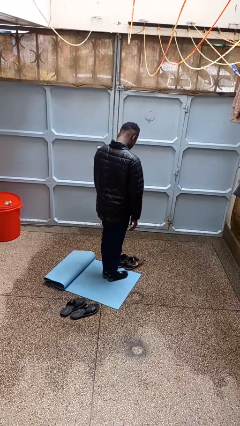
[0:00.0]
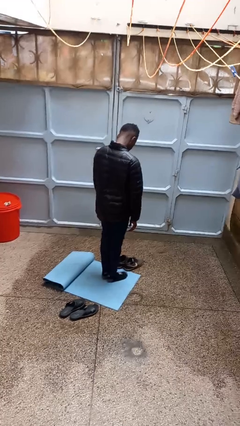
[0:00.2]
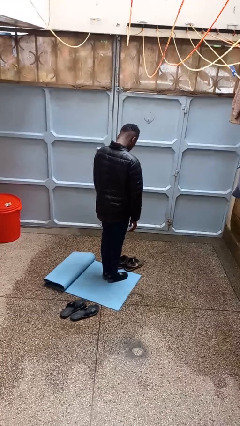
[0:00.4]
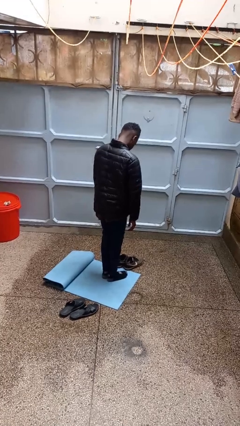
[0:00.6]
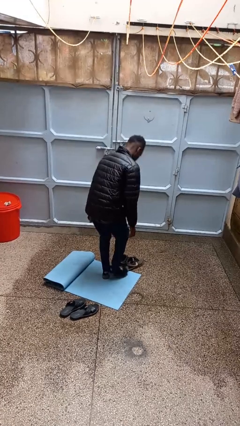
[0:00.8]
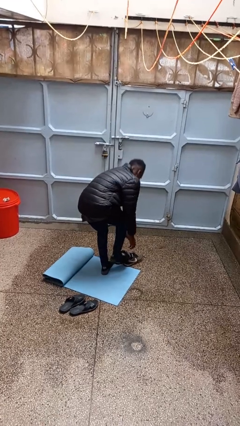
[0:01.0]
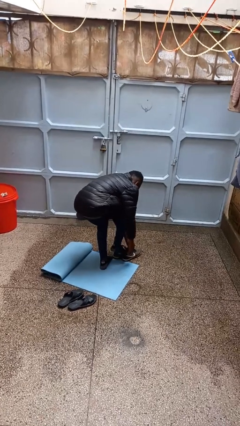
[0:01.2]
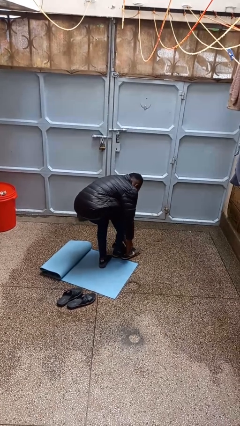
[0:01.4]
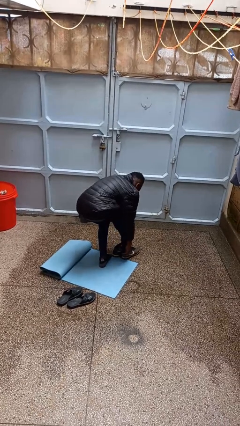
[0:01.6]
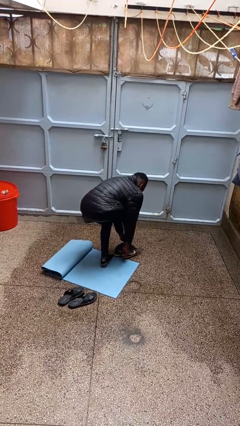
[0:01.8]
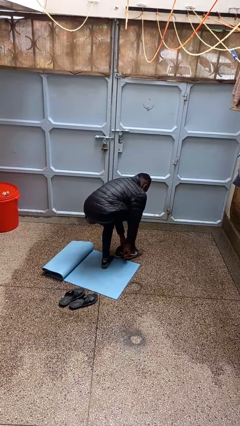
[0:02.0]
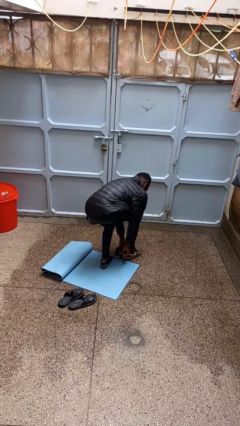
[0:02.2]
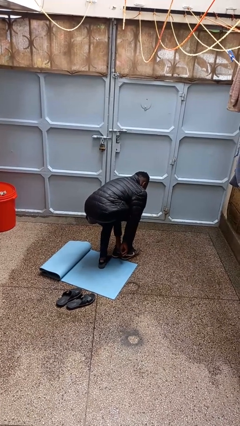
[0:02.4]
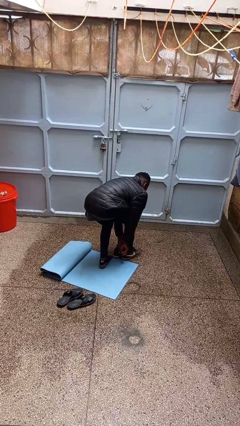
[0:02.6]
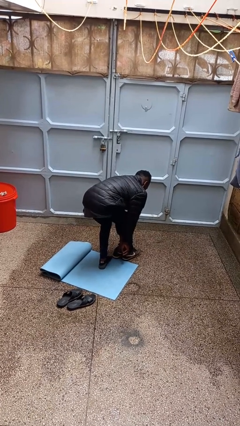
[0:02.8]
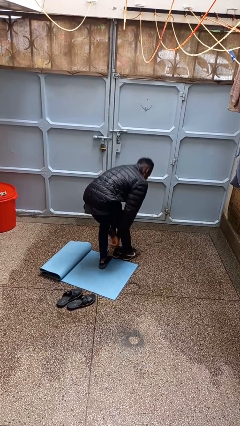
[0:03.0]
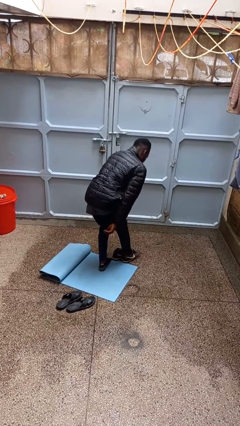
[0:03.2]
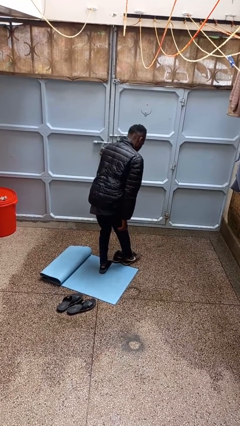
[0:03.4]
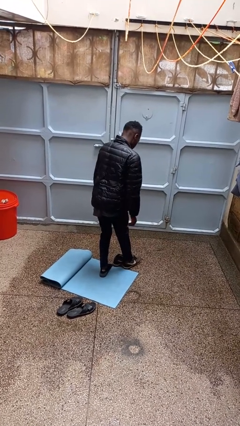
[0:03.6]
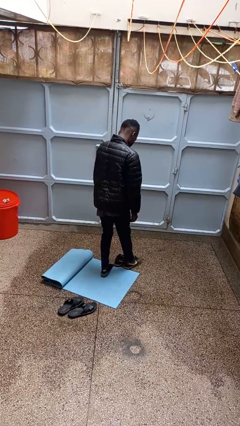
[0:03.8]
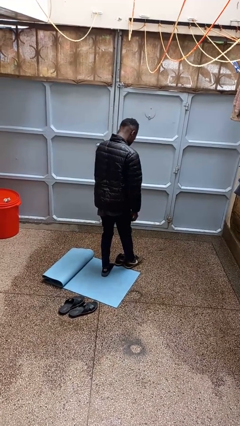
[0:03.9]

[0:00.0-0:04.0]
person puts on shoes

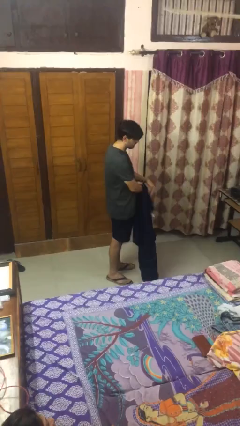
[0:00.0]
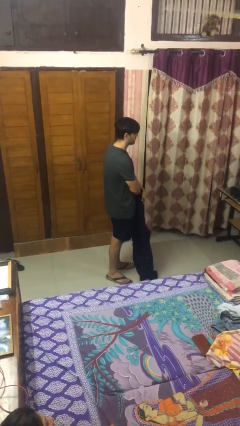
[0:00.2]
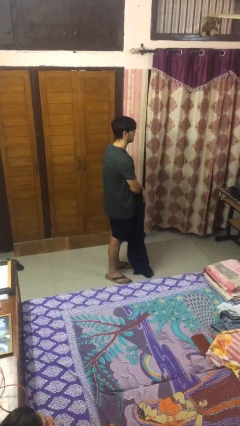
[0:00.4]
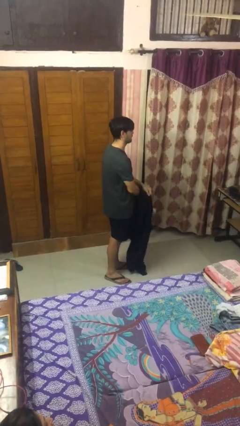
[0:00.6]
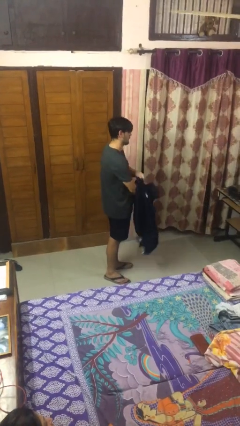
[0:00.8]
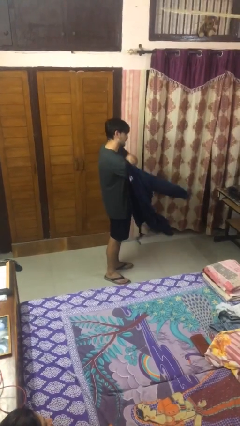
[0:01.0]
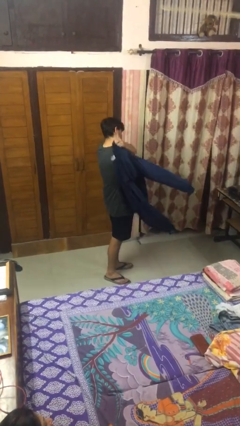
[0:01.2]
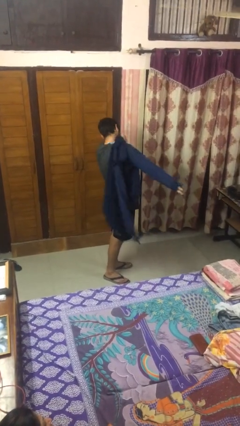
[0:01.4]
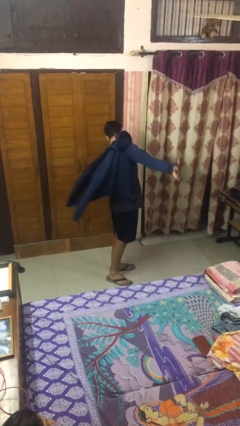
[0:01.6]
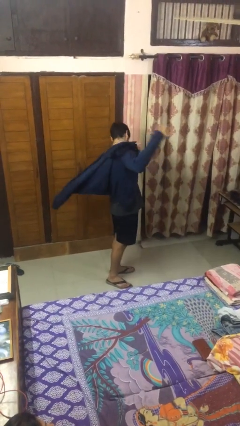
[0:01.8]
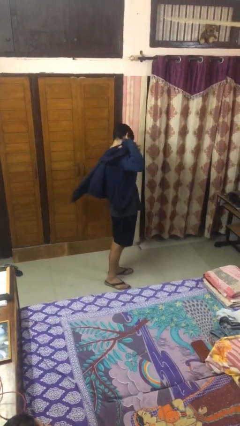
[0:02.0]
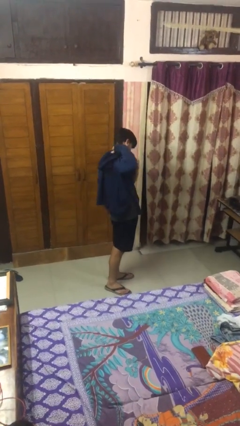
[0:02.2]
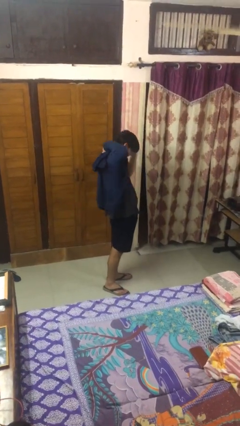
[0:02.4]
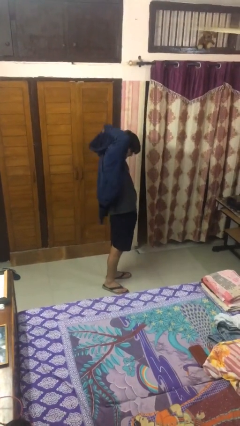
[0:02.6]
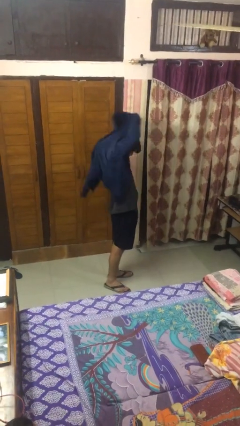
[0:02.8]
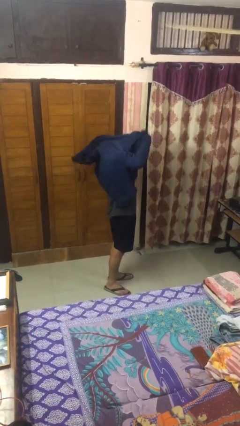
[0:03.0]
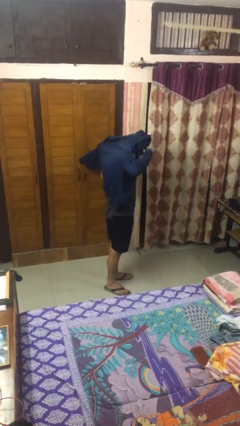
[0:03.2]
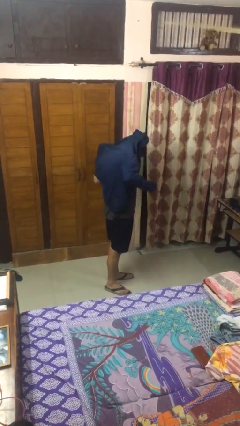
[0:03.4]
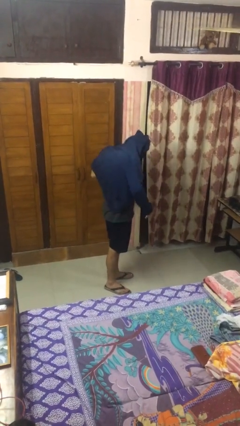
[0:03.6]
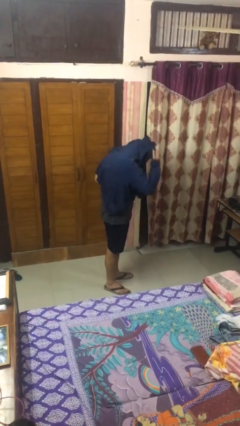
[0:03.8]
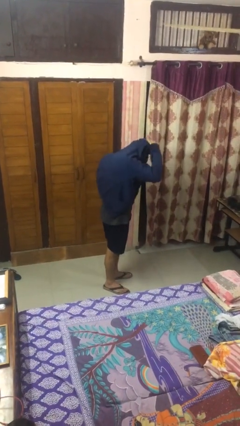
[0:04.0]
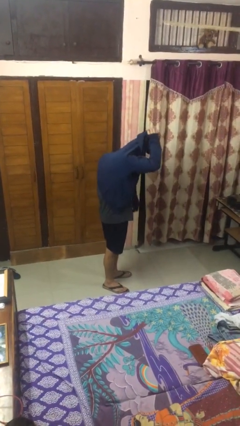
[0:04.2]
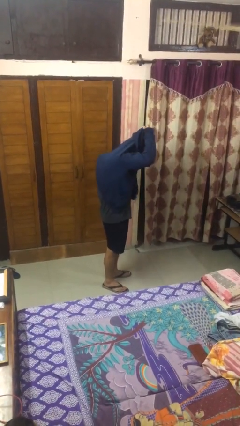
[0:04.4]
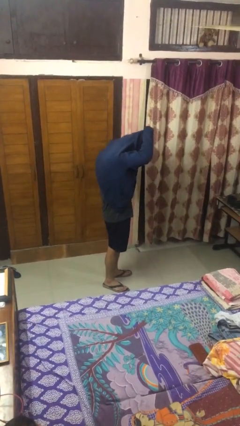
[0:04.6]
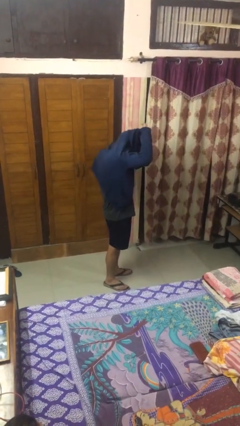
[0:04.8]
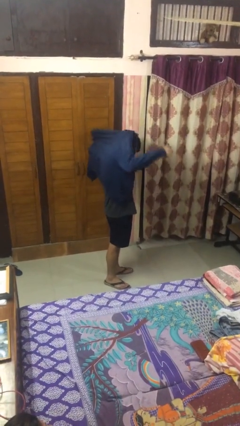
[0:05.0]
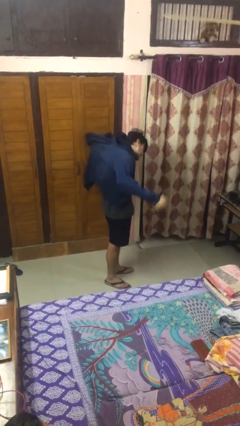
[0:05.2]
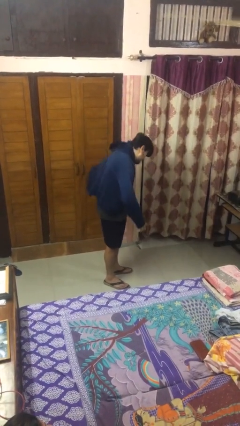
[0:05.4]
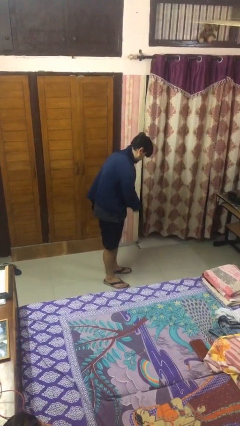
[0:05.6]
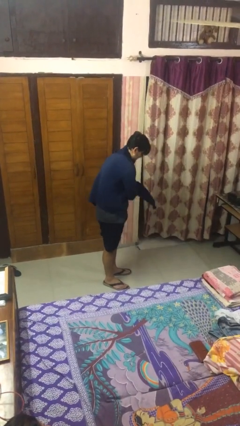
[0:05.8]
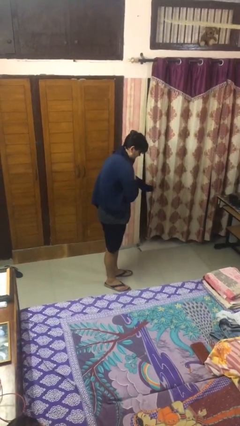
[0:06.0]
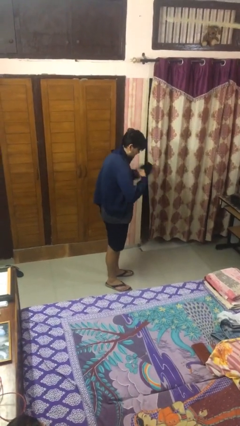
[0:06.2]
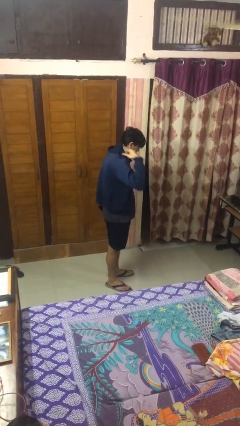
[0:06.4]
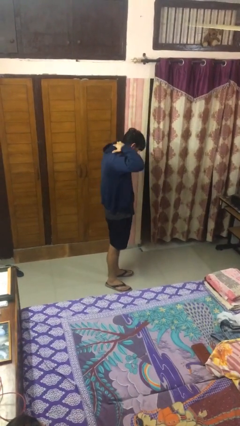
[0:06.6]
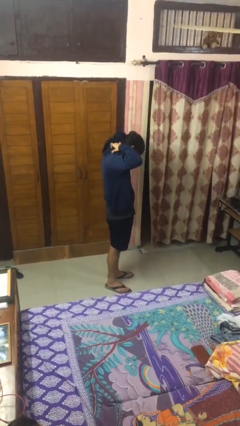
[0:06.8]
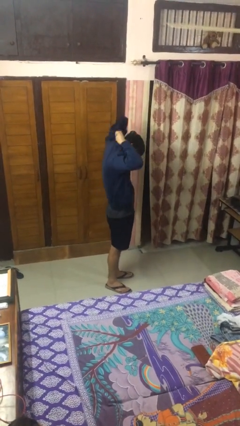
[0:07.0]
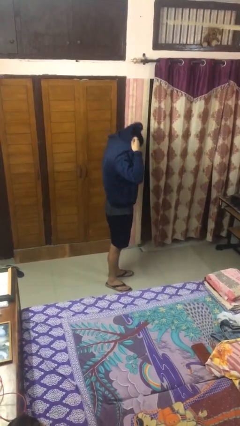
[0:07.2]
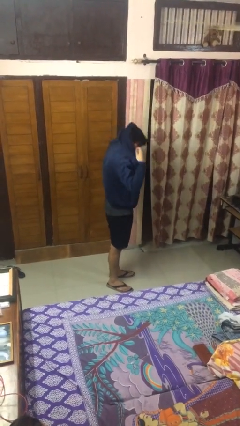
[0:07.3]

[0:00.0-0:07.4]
person puts on hoodie

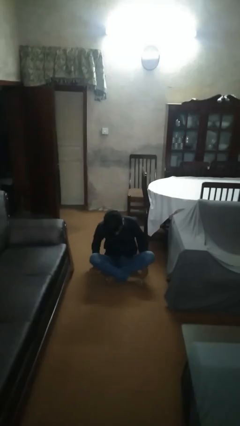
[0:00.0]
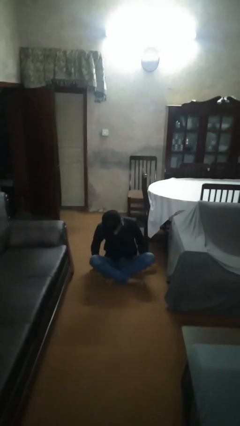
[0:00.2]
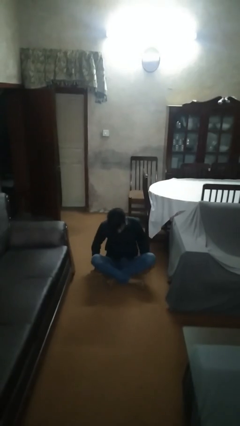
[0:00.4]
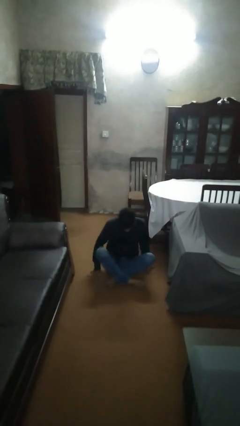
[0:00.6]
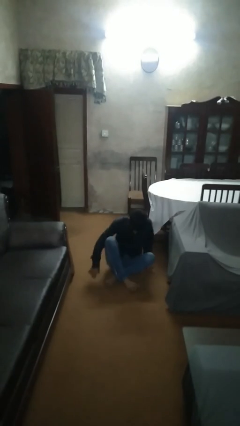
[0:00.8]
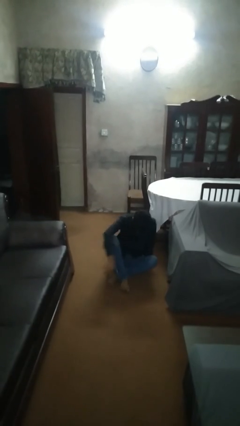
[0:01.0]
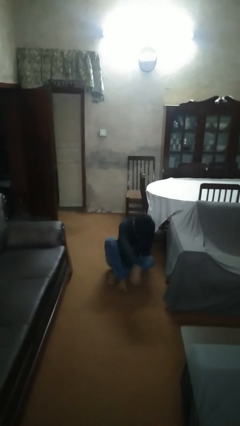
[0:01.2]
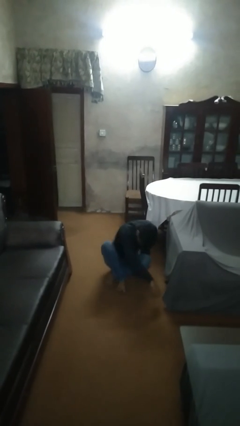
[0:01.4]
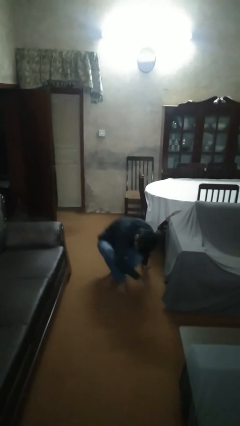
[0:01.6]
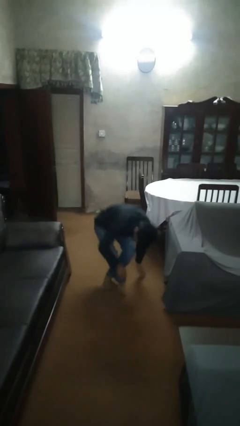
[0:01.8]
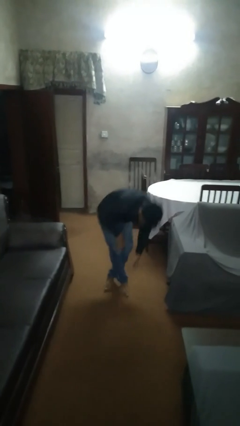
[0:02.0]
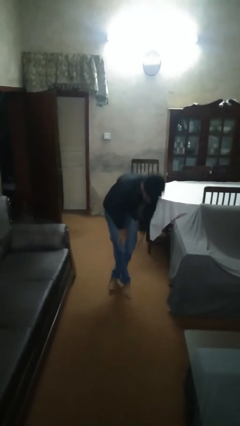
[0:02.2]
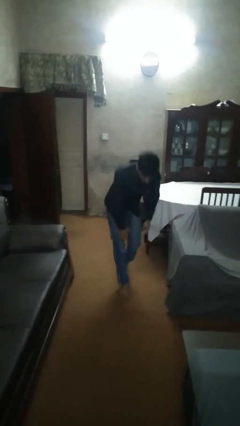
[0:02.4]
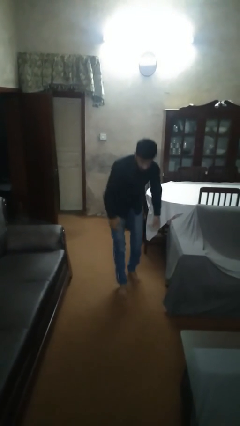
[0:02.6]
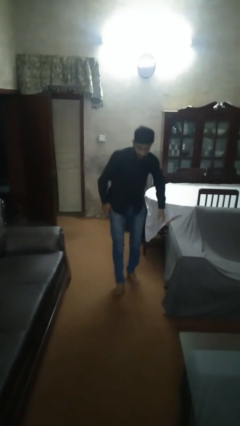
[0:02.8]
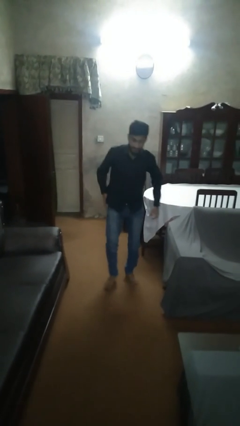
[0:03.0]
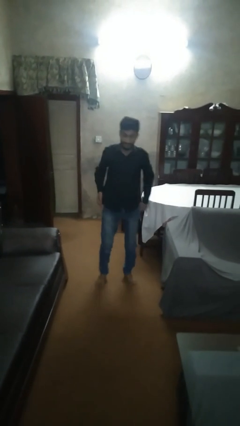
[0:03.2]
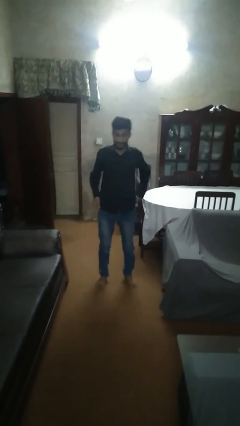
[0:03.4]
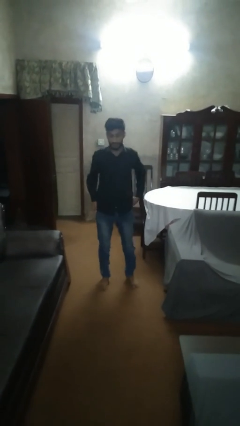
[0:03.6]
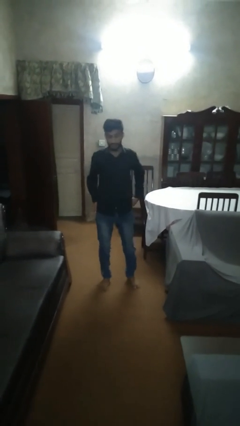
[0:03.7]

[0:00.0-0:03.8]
person stands up from floor

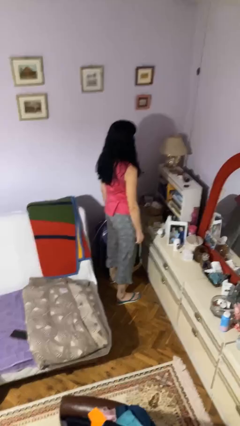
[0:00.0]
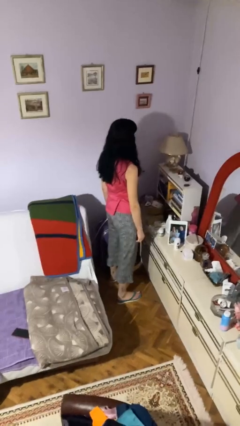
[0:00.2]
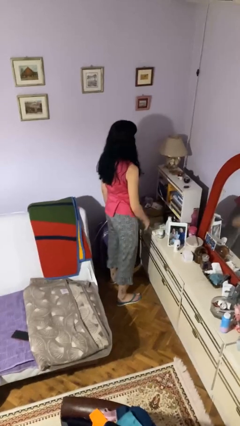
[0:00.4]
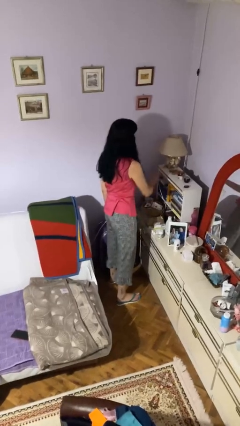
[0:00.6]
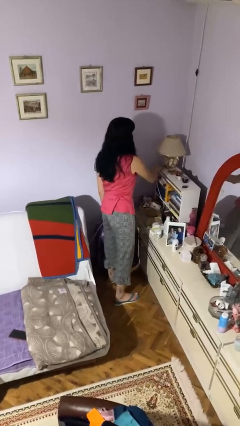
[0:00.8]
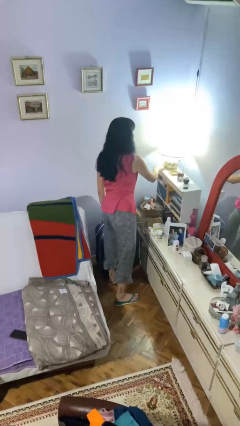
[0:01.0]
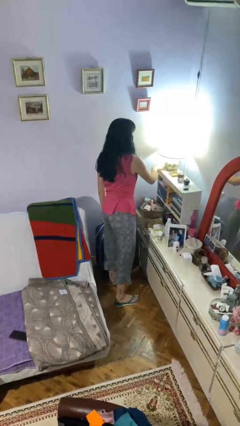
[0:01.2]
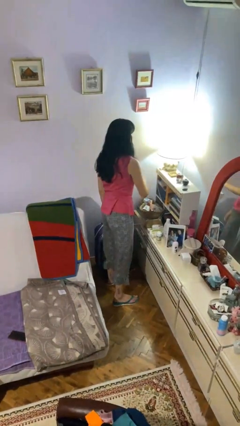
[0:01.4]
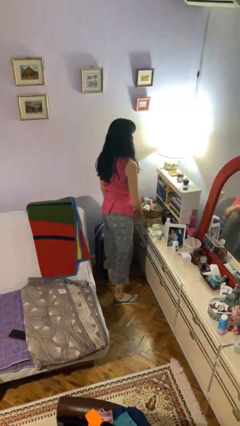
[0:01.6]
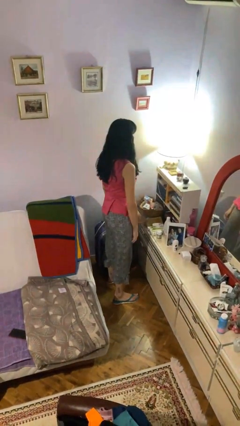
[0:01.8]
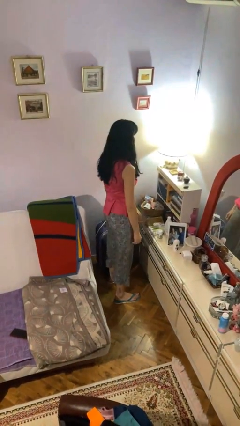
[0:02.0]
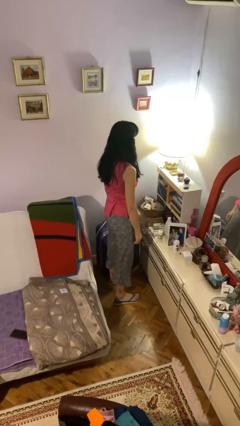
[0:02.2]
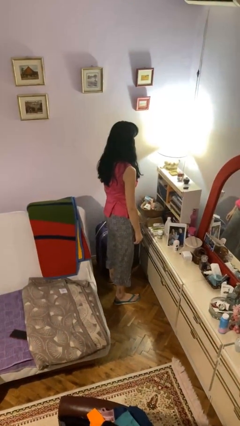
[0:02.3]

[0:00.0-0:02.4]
person turns on lamp
